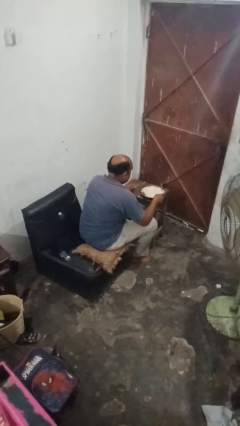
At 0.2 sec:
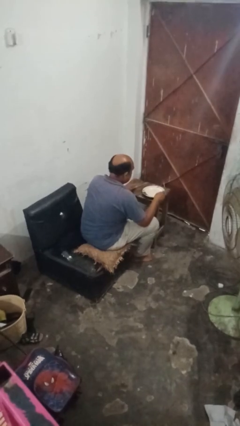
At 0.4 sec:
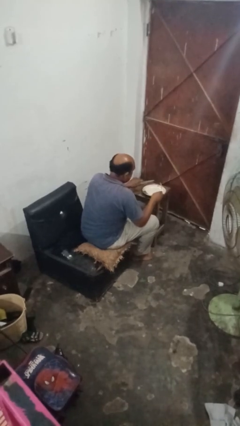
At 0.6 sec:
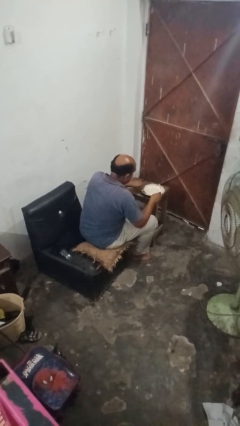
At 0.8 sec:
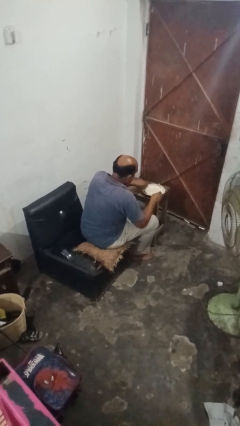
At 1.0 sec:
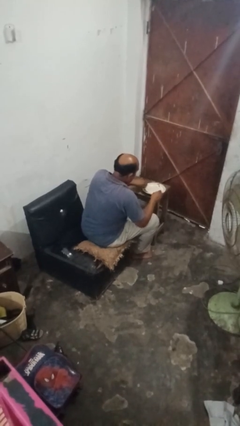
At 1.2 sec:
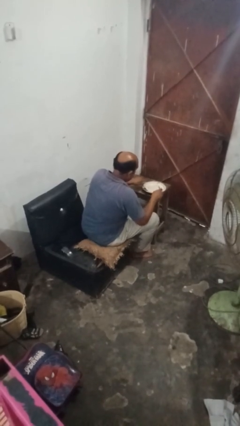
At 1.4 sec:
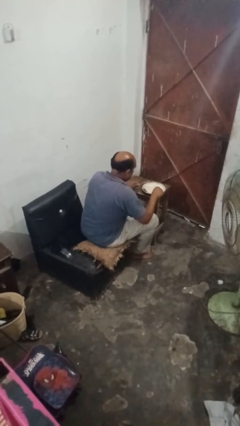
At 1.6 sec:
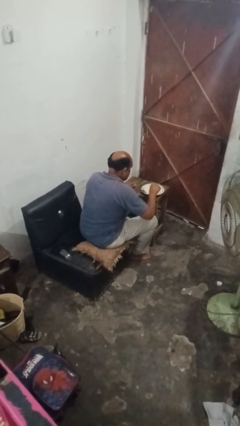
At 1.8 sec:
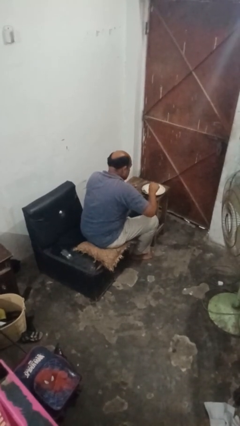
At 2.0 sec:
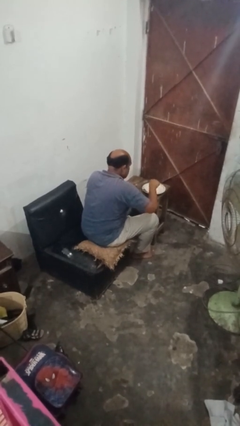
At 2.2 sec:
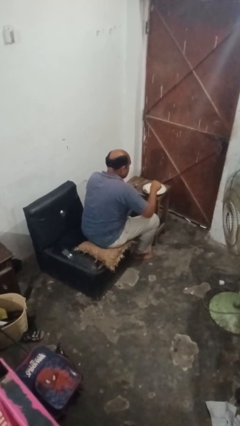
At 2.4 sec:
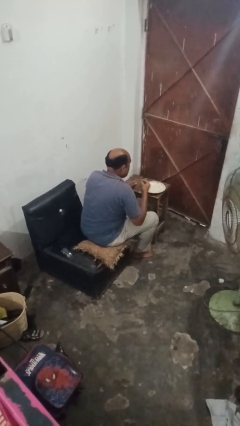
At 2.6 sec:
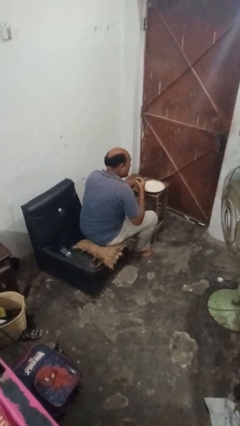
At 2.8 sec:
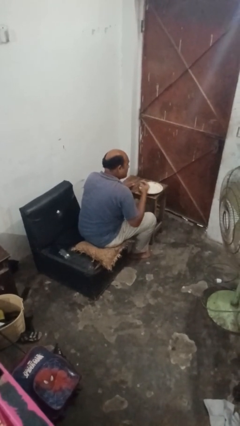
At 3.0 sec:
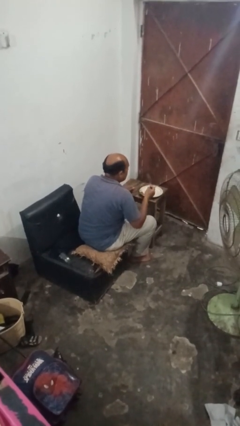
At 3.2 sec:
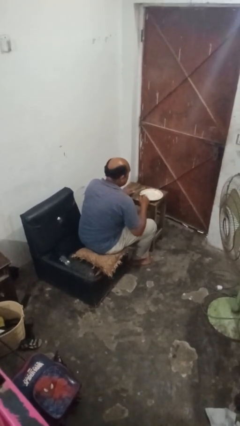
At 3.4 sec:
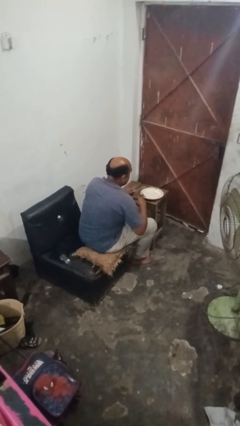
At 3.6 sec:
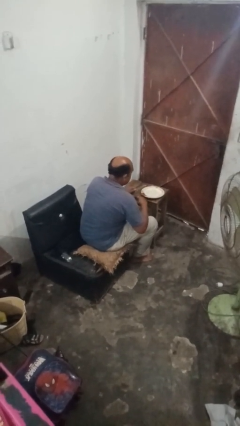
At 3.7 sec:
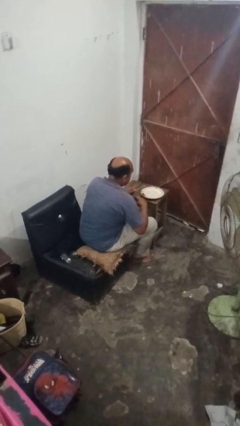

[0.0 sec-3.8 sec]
person eats with utensil

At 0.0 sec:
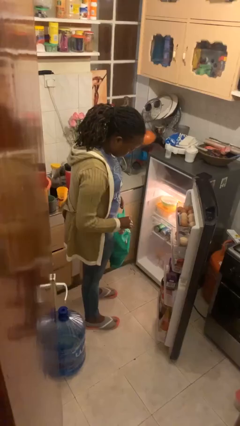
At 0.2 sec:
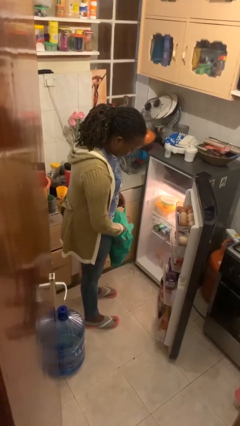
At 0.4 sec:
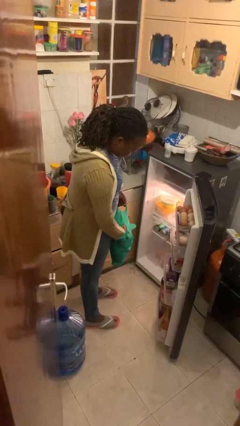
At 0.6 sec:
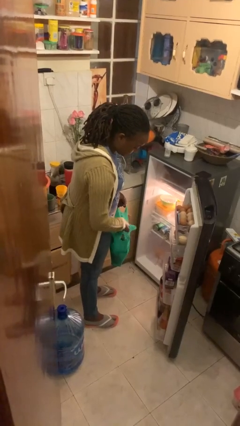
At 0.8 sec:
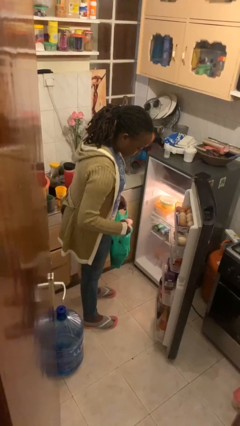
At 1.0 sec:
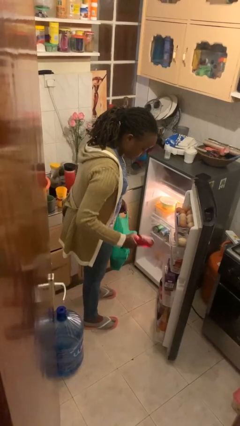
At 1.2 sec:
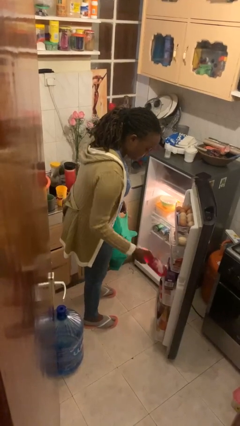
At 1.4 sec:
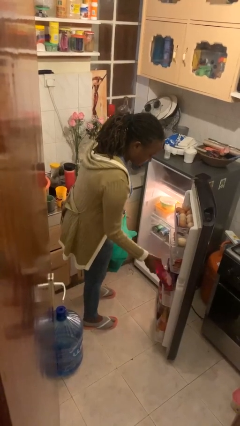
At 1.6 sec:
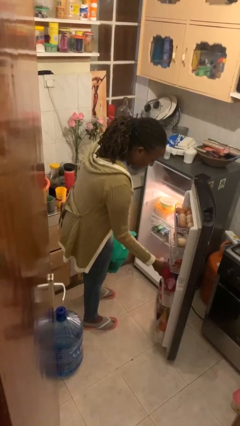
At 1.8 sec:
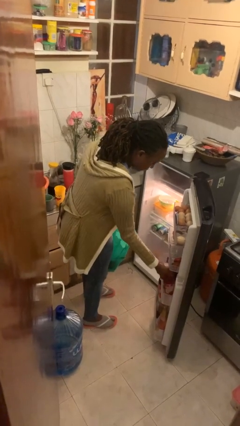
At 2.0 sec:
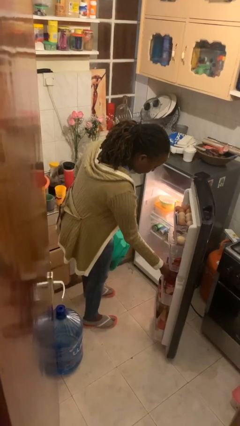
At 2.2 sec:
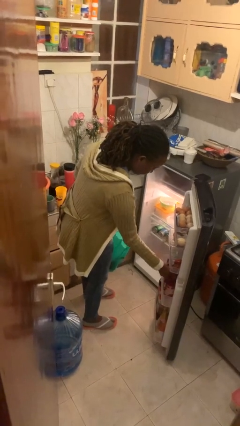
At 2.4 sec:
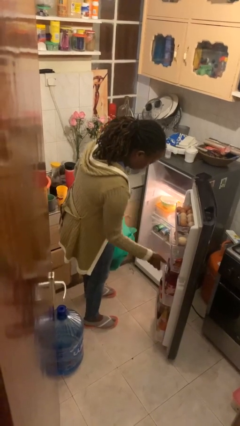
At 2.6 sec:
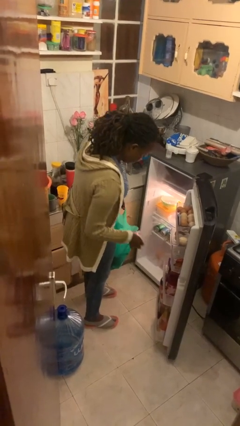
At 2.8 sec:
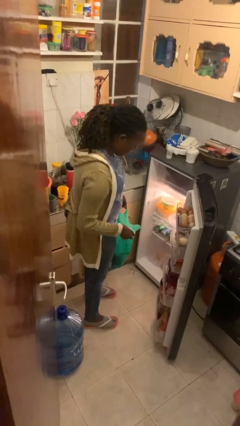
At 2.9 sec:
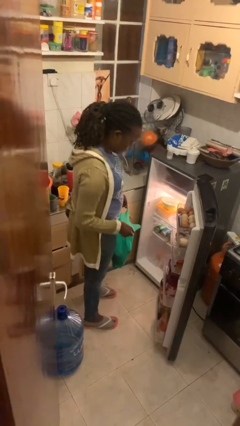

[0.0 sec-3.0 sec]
person loads groceries into refrigerator

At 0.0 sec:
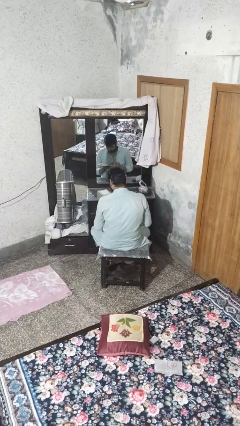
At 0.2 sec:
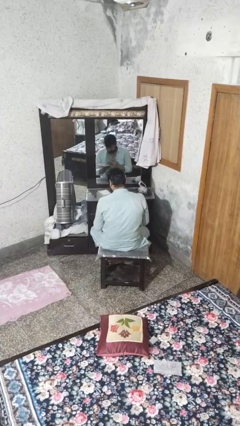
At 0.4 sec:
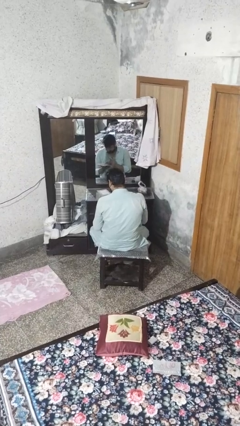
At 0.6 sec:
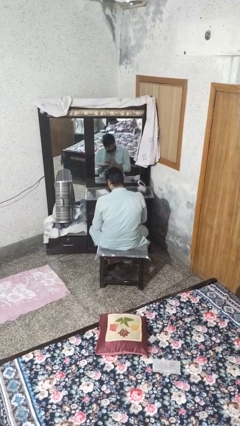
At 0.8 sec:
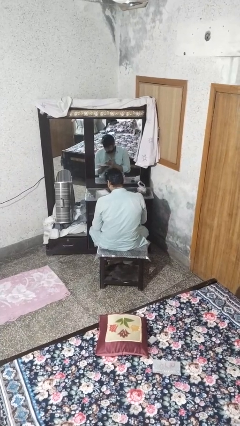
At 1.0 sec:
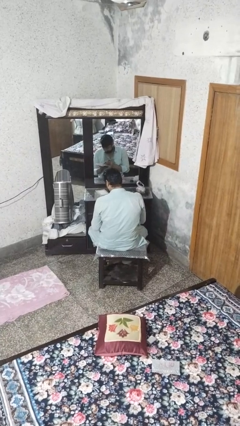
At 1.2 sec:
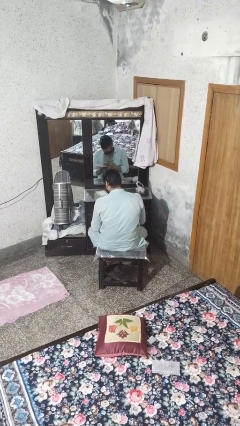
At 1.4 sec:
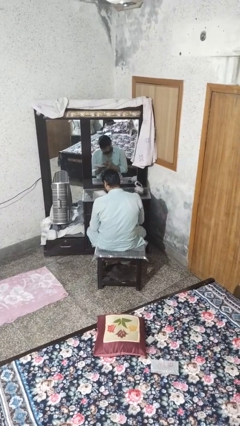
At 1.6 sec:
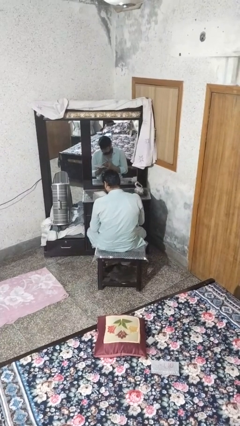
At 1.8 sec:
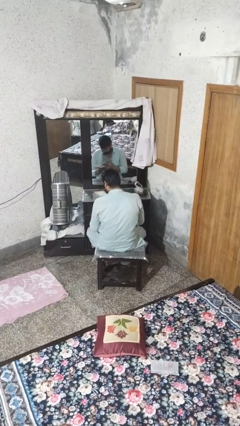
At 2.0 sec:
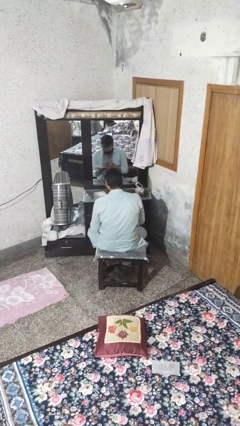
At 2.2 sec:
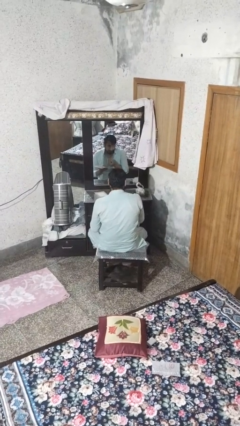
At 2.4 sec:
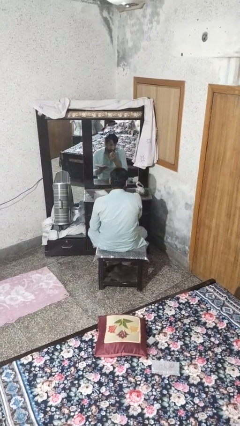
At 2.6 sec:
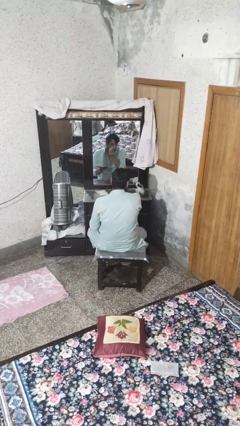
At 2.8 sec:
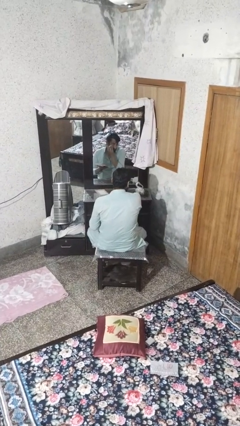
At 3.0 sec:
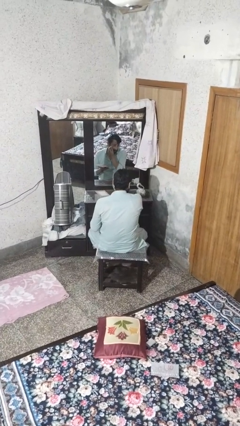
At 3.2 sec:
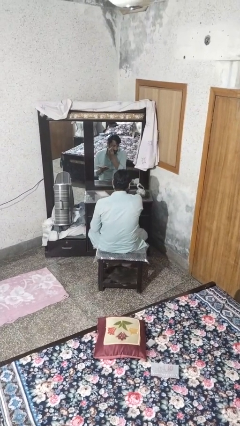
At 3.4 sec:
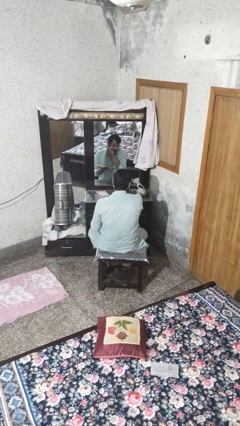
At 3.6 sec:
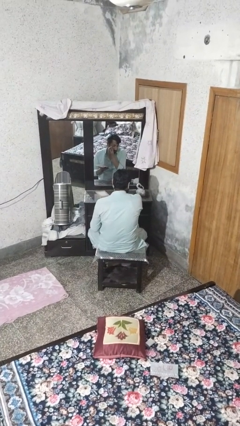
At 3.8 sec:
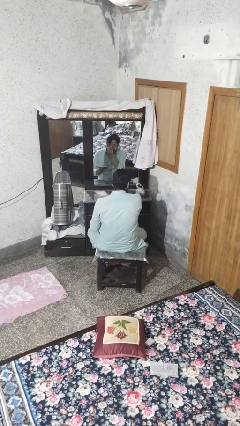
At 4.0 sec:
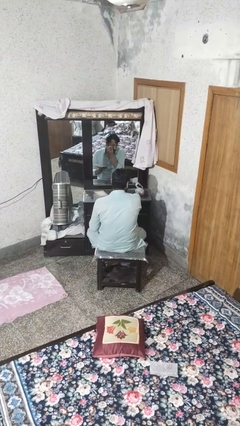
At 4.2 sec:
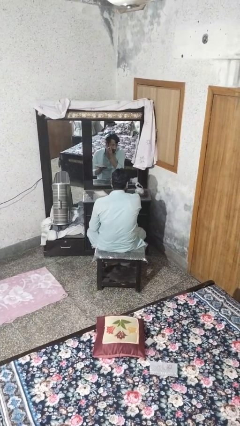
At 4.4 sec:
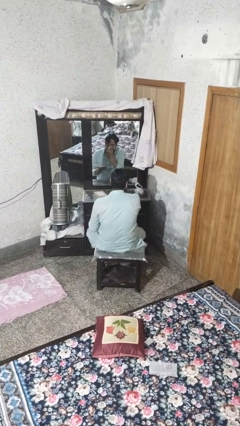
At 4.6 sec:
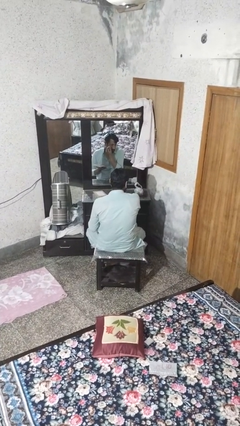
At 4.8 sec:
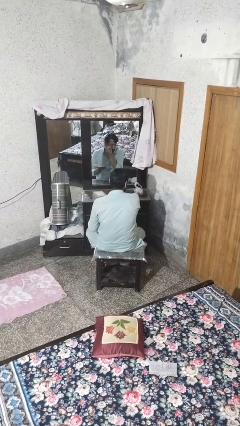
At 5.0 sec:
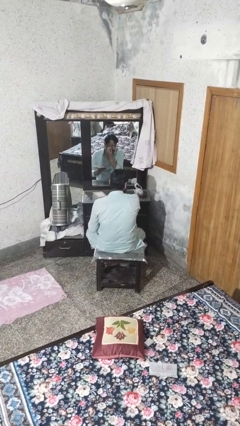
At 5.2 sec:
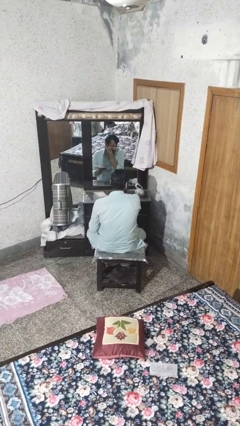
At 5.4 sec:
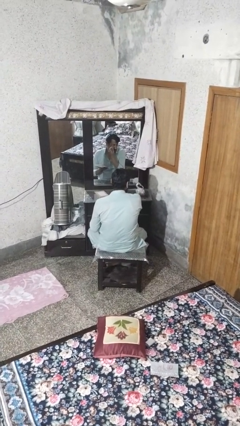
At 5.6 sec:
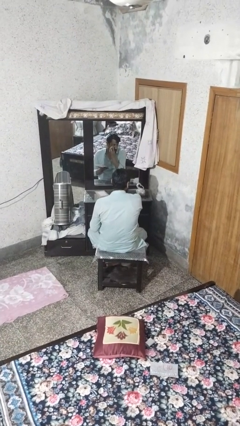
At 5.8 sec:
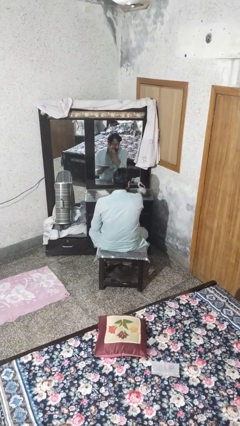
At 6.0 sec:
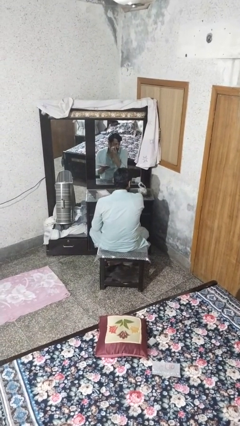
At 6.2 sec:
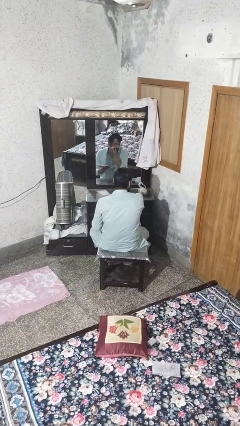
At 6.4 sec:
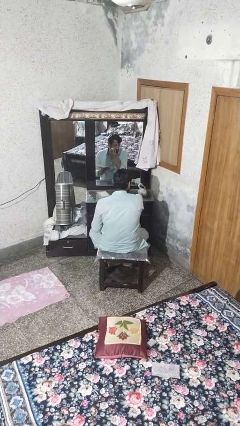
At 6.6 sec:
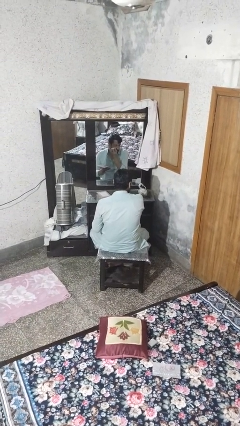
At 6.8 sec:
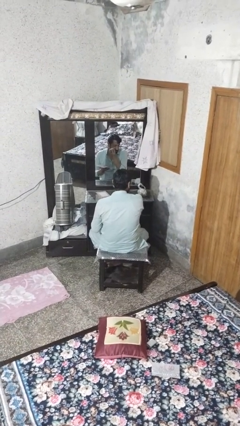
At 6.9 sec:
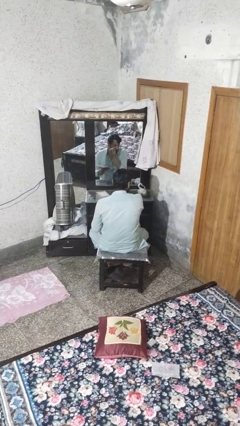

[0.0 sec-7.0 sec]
person applies eye makeup

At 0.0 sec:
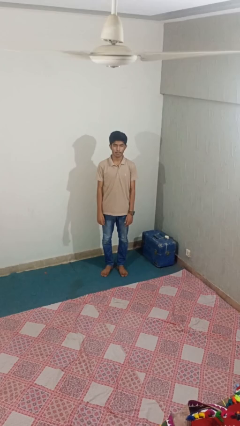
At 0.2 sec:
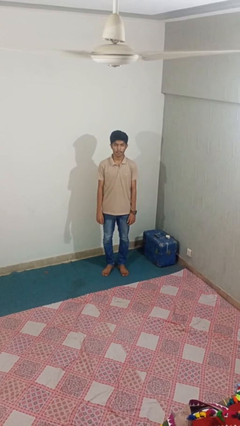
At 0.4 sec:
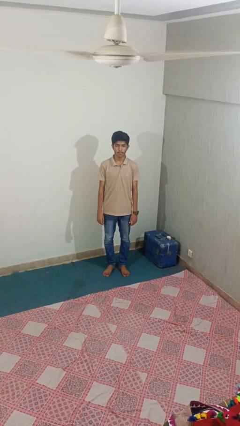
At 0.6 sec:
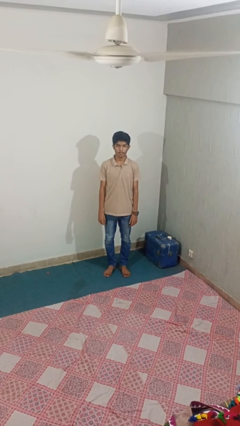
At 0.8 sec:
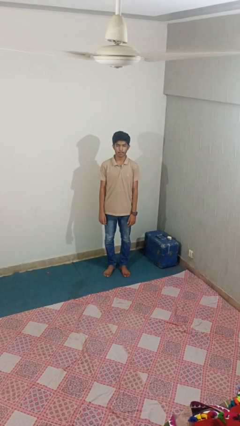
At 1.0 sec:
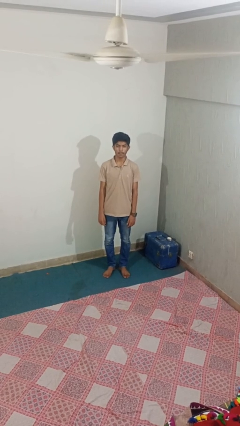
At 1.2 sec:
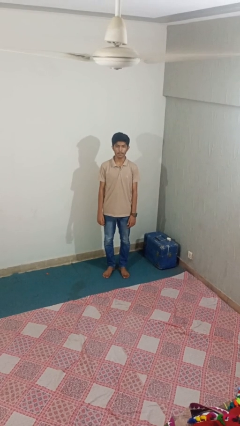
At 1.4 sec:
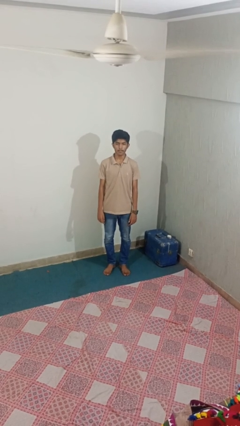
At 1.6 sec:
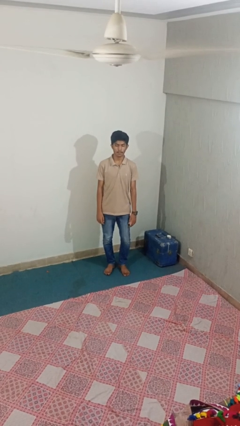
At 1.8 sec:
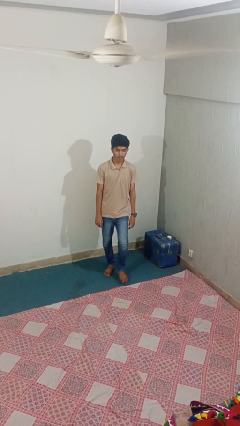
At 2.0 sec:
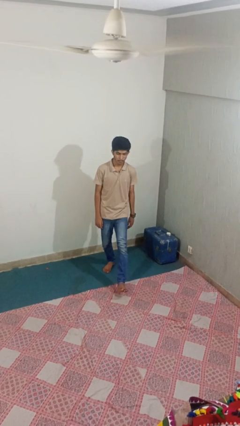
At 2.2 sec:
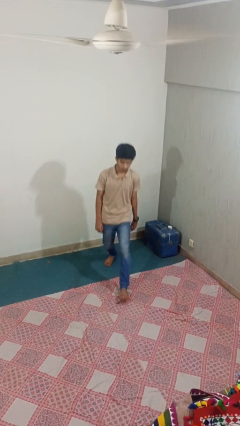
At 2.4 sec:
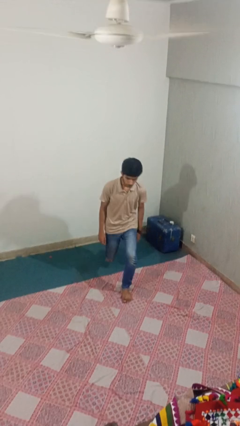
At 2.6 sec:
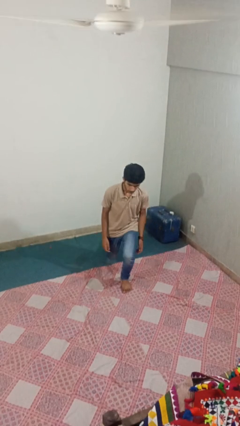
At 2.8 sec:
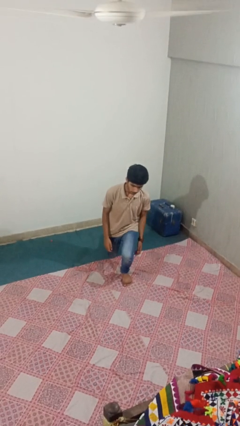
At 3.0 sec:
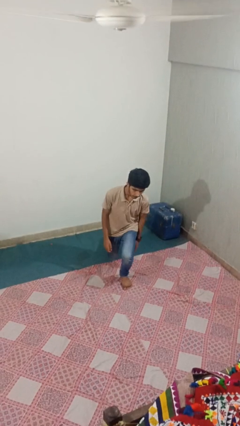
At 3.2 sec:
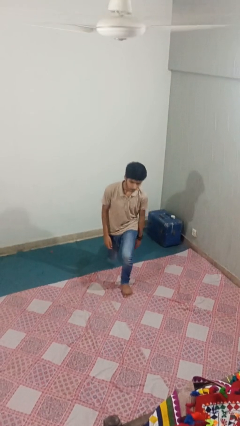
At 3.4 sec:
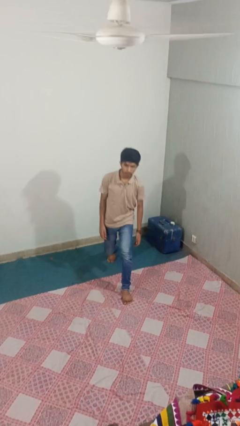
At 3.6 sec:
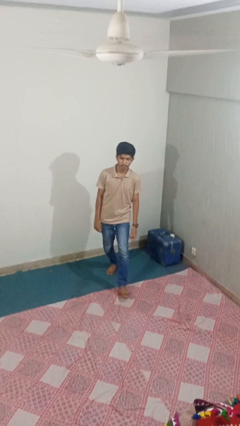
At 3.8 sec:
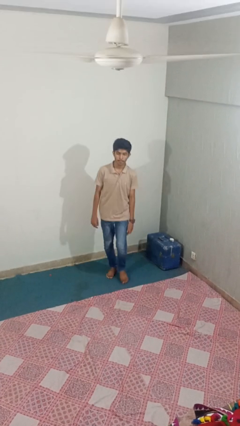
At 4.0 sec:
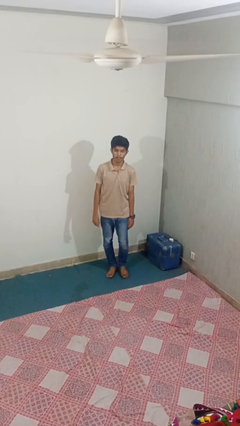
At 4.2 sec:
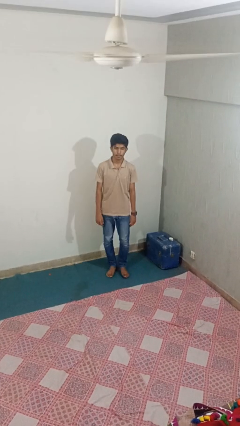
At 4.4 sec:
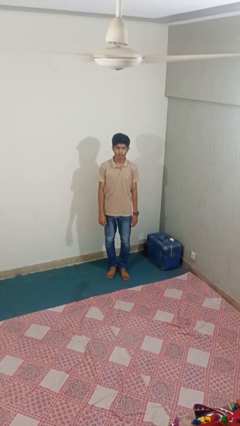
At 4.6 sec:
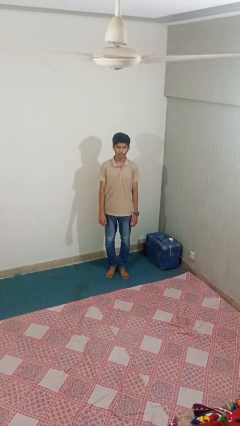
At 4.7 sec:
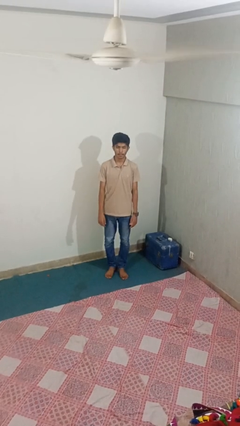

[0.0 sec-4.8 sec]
person exercises with lunges
